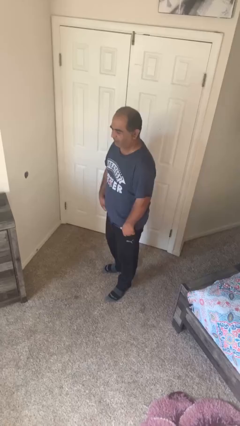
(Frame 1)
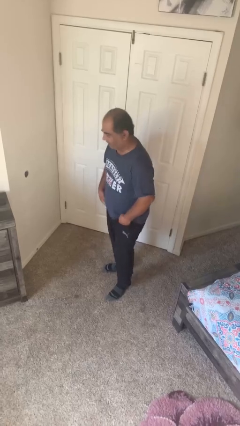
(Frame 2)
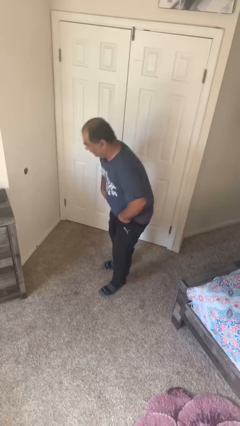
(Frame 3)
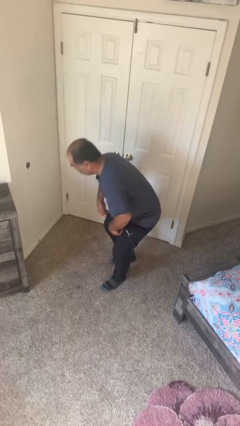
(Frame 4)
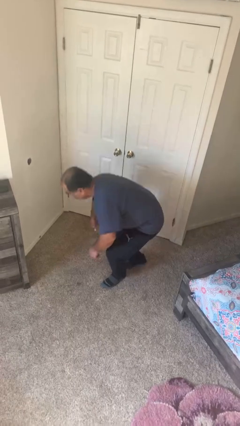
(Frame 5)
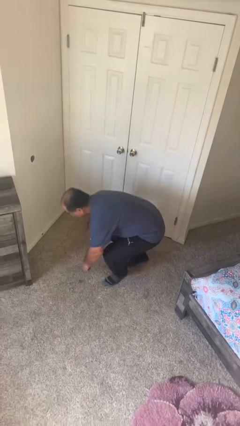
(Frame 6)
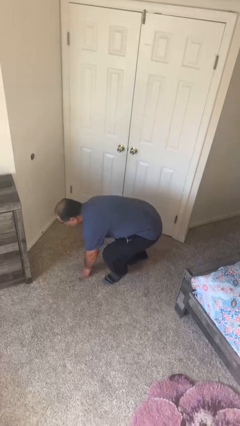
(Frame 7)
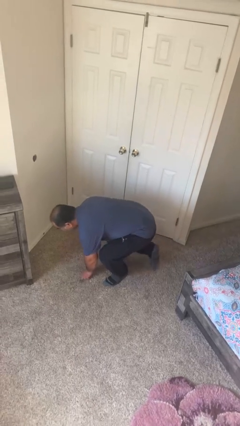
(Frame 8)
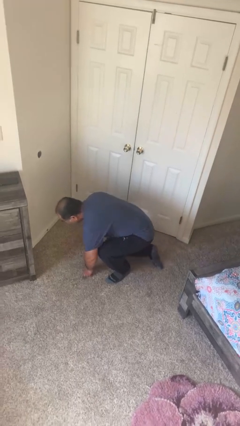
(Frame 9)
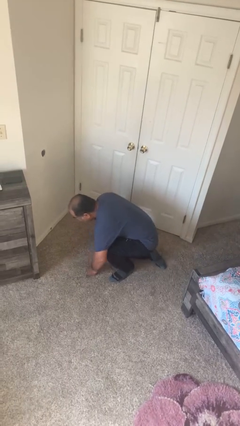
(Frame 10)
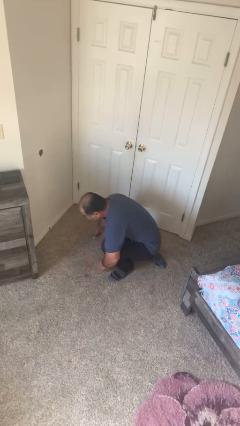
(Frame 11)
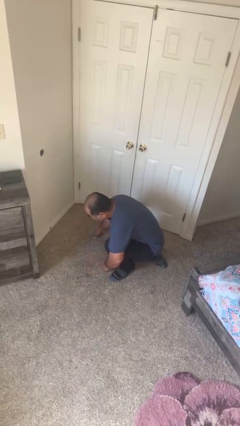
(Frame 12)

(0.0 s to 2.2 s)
person sits down

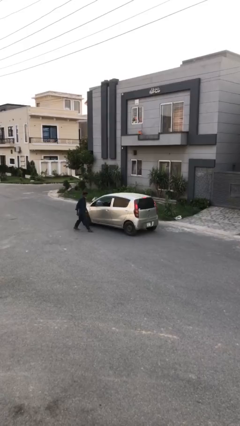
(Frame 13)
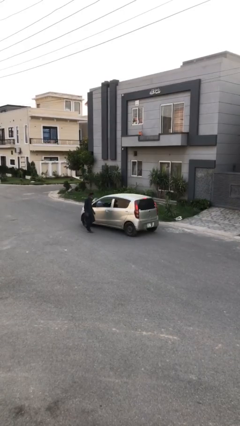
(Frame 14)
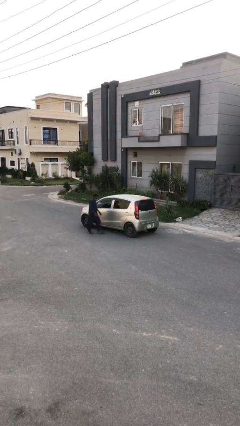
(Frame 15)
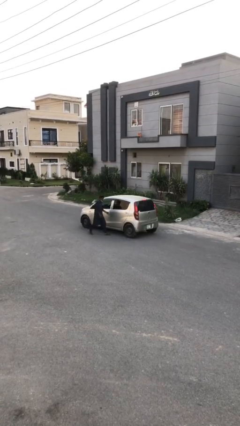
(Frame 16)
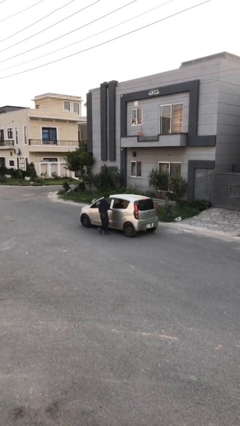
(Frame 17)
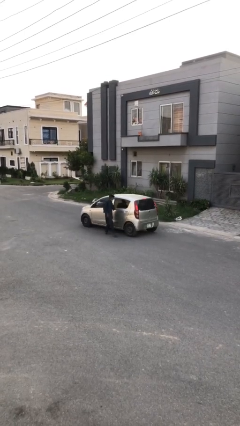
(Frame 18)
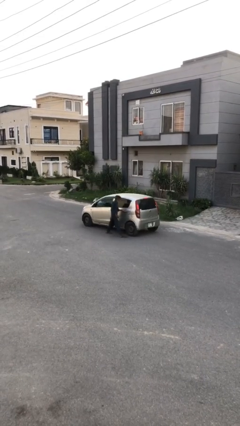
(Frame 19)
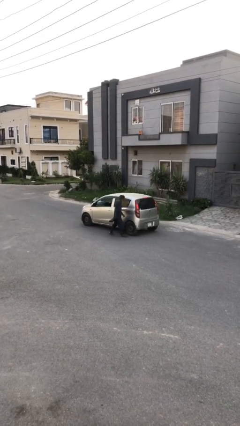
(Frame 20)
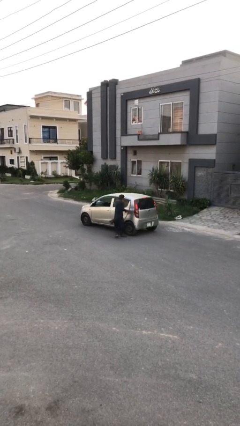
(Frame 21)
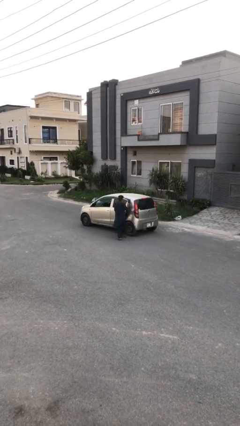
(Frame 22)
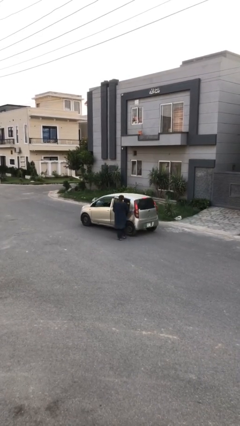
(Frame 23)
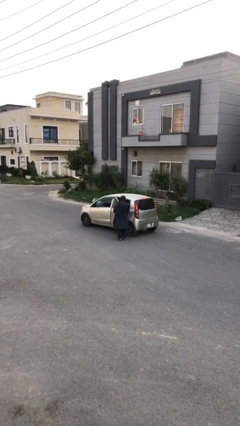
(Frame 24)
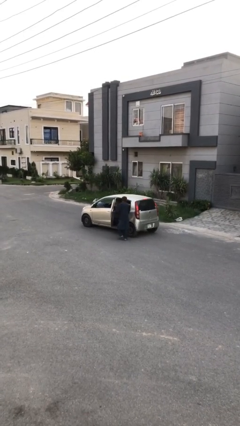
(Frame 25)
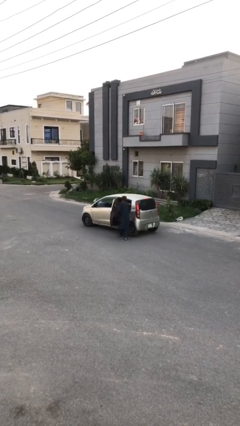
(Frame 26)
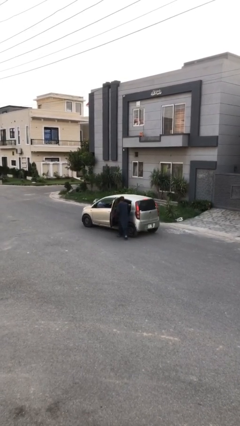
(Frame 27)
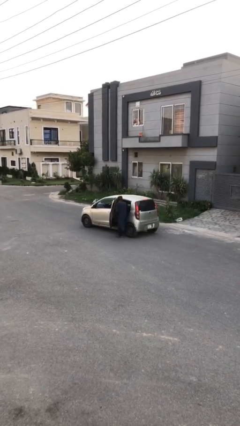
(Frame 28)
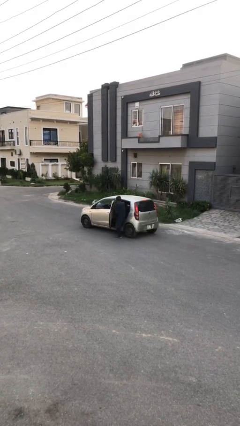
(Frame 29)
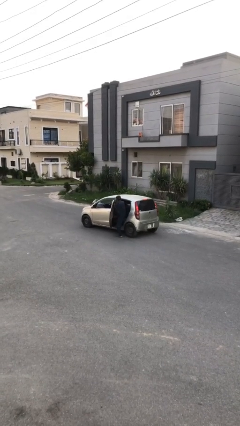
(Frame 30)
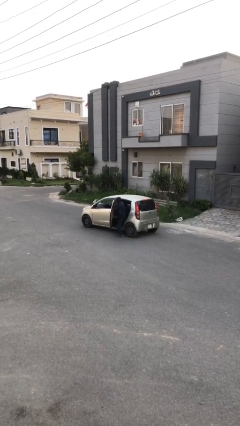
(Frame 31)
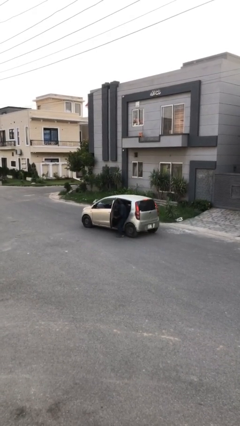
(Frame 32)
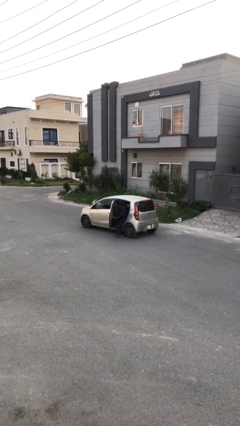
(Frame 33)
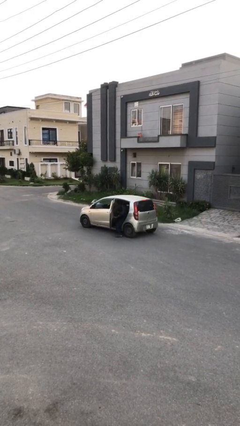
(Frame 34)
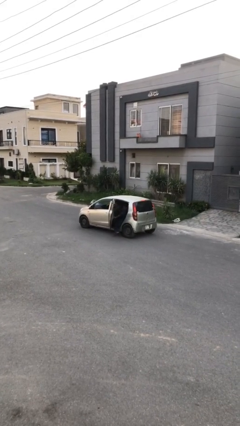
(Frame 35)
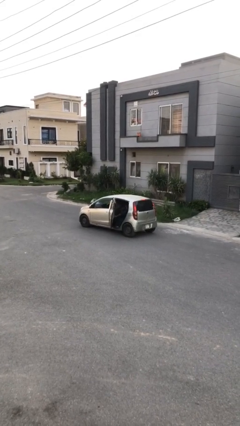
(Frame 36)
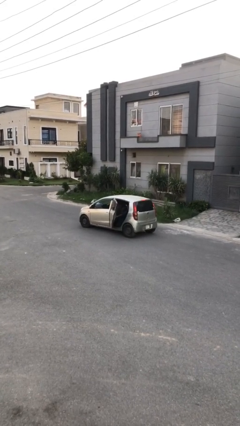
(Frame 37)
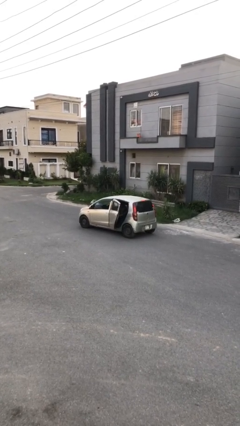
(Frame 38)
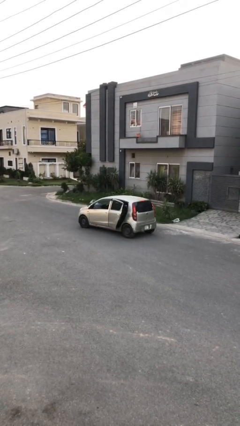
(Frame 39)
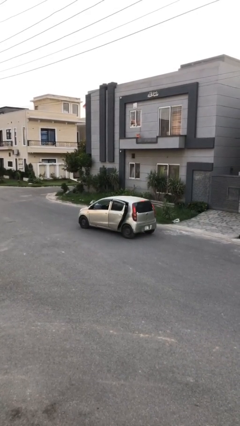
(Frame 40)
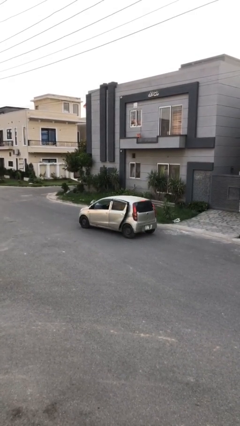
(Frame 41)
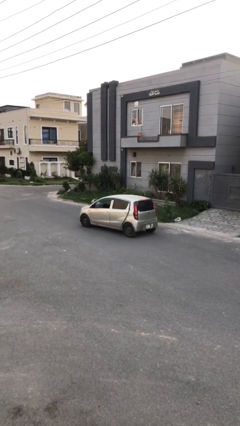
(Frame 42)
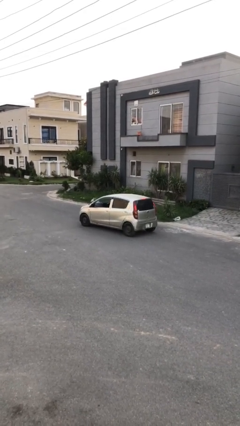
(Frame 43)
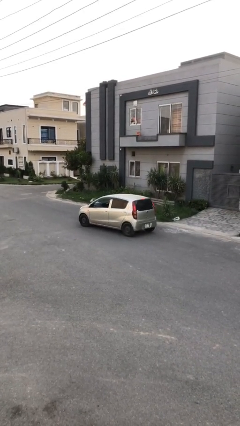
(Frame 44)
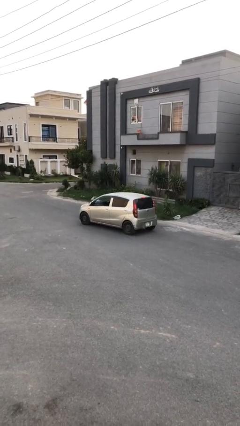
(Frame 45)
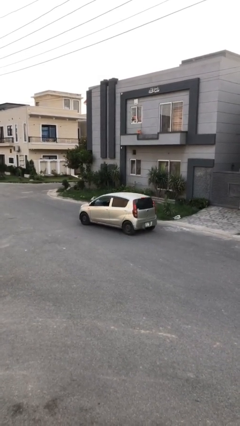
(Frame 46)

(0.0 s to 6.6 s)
car picks up person

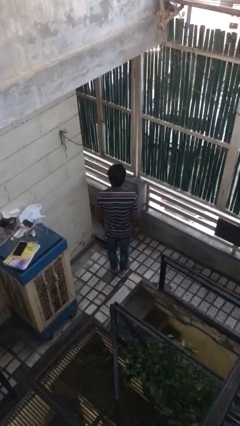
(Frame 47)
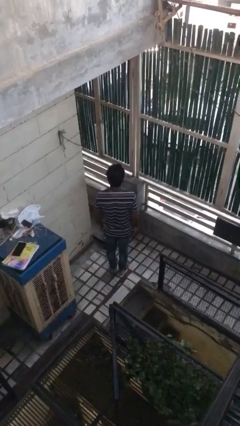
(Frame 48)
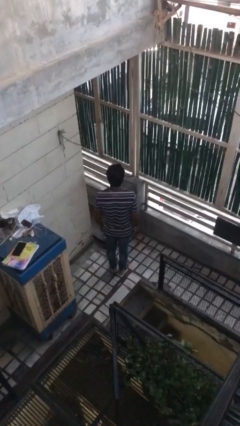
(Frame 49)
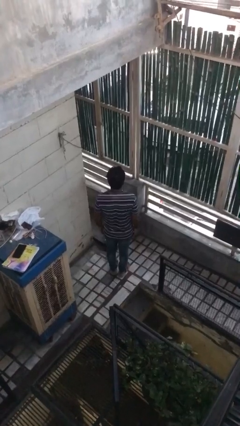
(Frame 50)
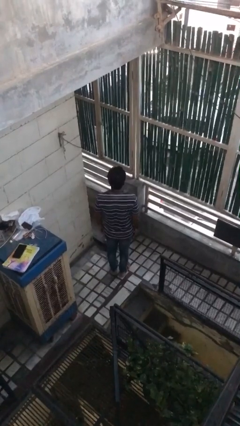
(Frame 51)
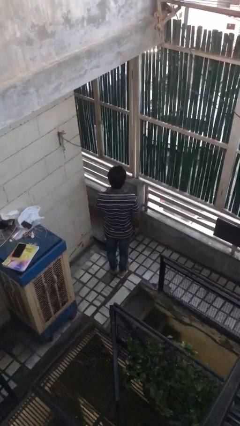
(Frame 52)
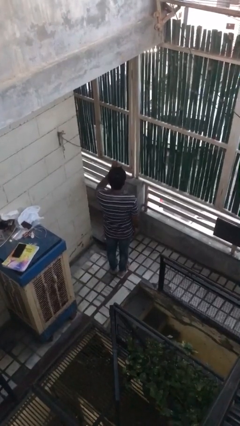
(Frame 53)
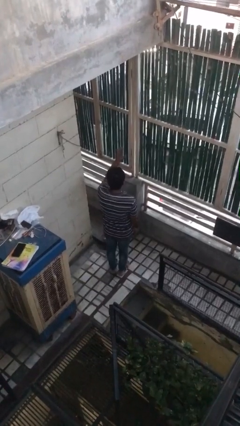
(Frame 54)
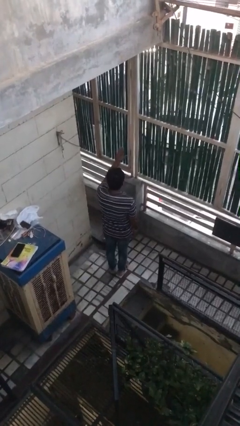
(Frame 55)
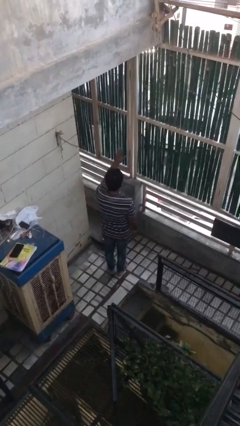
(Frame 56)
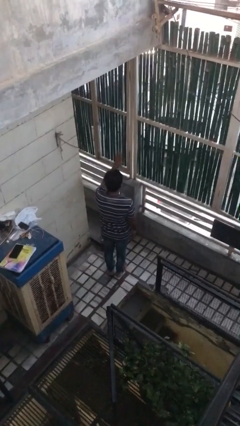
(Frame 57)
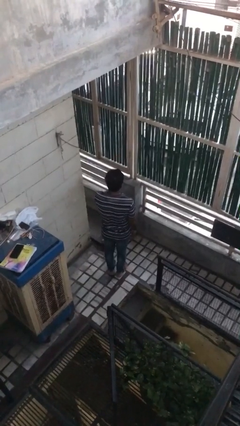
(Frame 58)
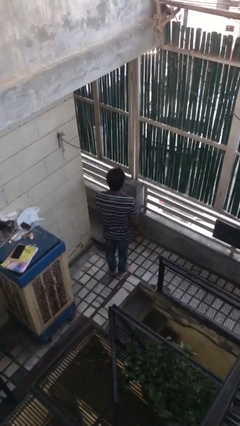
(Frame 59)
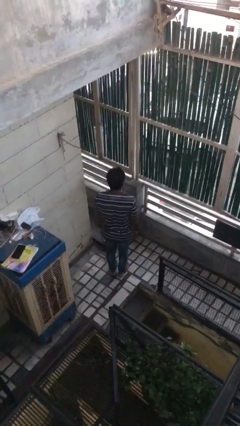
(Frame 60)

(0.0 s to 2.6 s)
person gestures stop

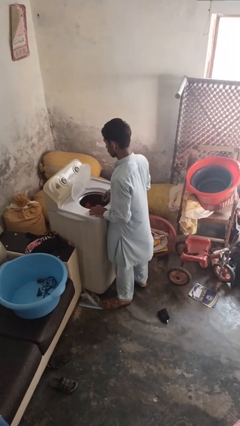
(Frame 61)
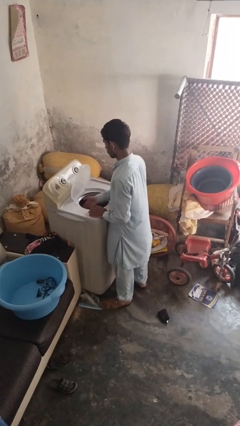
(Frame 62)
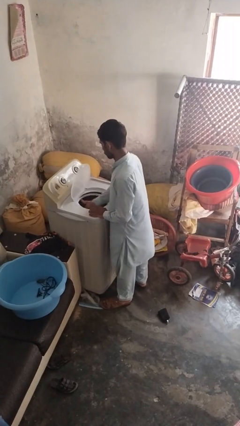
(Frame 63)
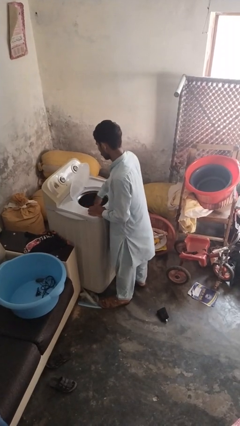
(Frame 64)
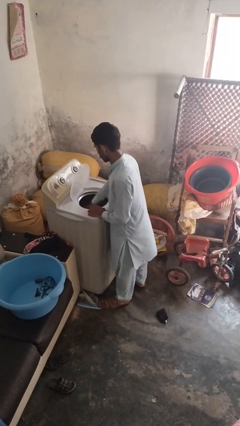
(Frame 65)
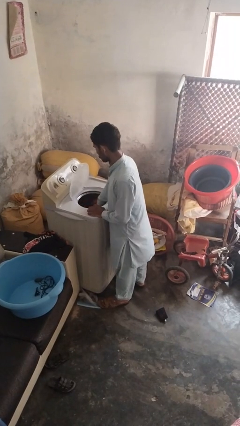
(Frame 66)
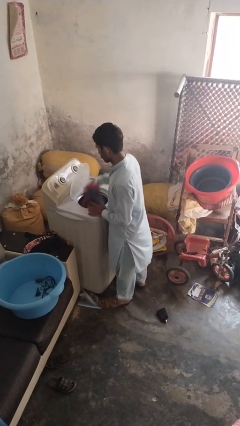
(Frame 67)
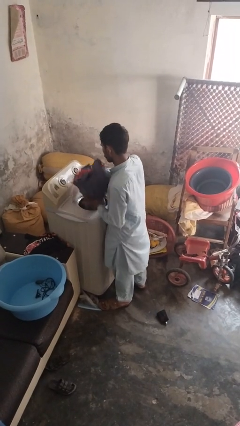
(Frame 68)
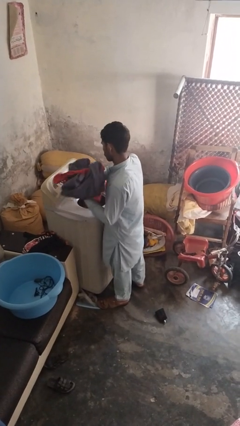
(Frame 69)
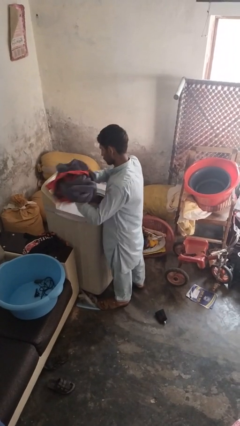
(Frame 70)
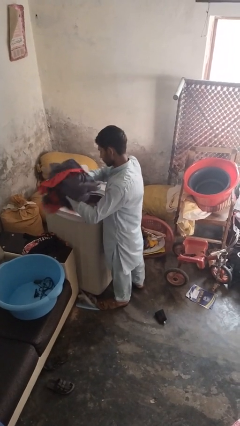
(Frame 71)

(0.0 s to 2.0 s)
person loads clotheswasher

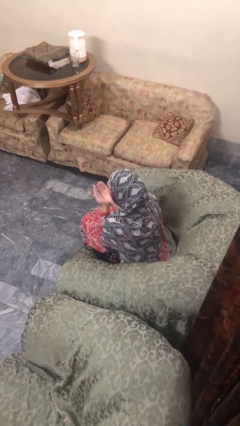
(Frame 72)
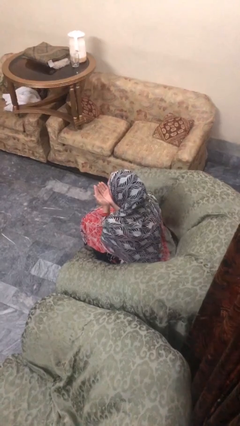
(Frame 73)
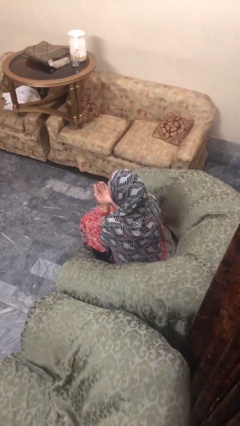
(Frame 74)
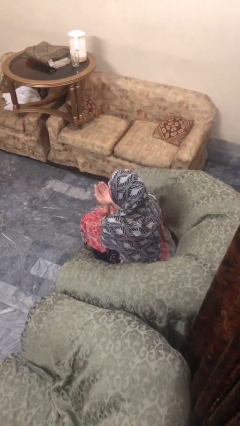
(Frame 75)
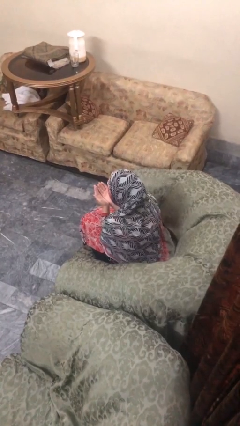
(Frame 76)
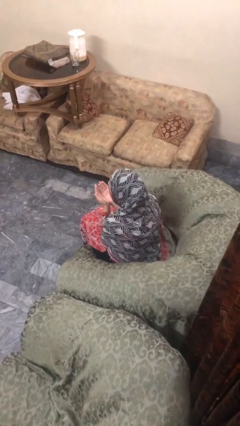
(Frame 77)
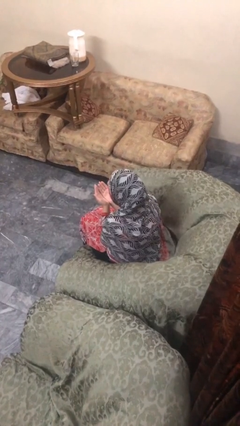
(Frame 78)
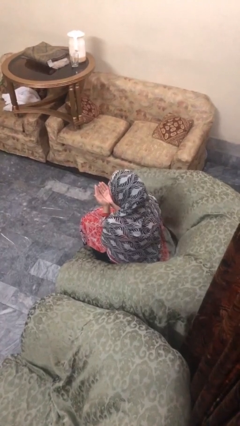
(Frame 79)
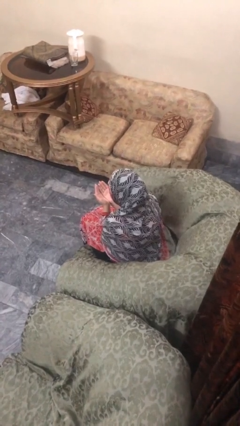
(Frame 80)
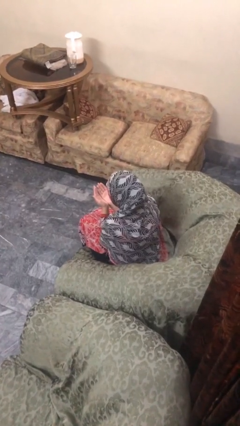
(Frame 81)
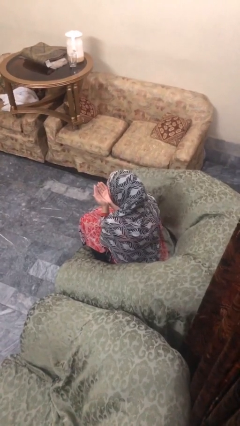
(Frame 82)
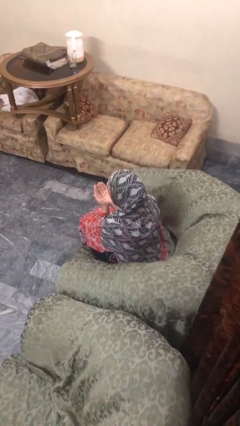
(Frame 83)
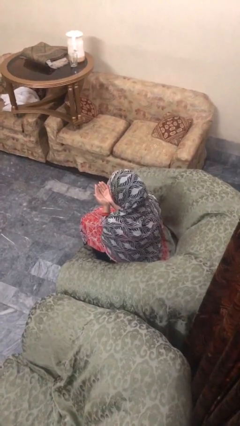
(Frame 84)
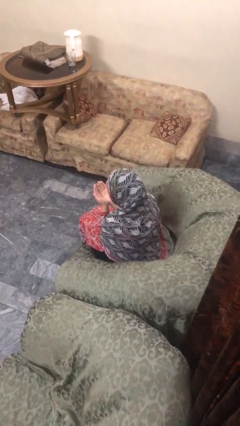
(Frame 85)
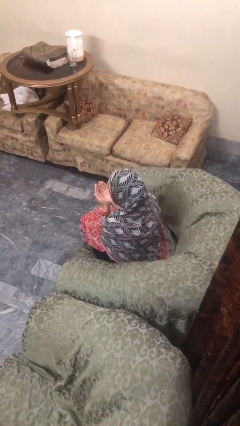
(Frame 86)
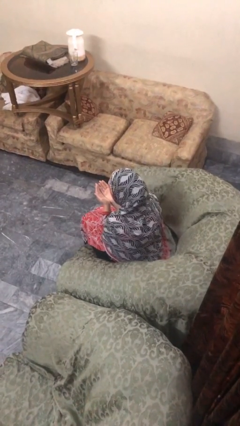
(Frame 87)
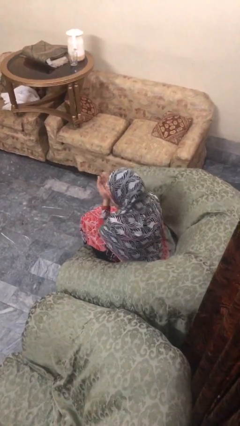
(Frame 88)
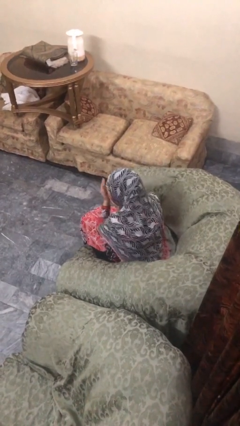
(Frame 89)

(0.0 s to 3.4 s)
person prays
